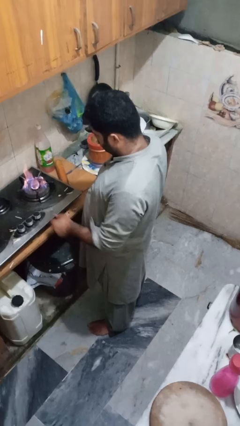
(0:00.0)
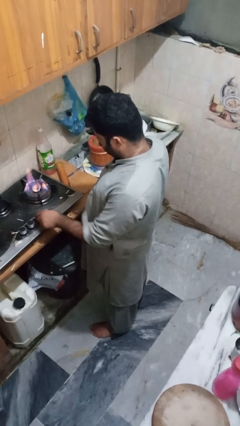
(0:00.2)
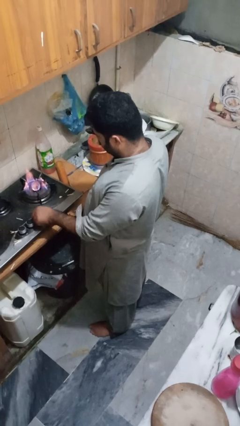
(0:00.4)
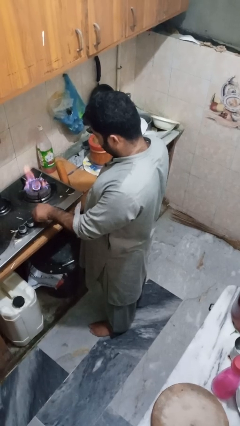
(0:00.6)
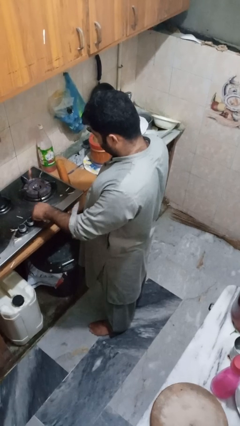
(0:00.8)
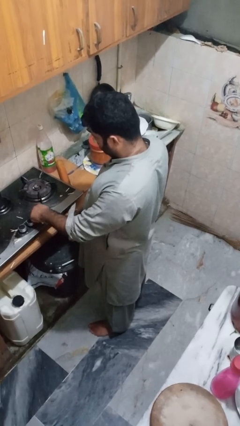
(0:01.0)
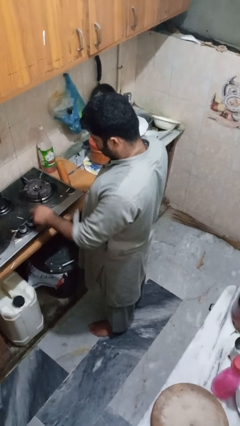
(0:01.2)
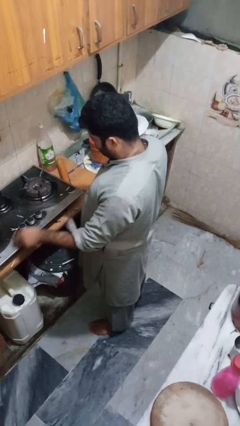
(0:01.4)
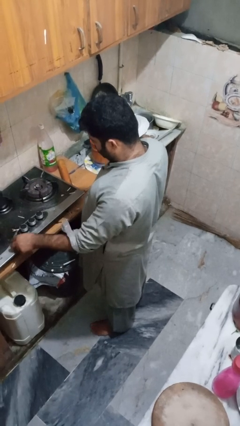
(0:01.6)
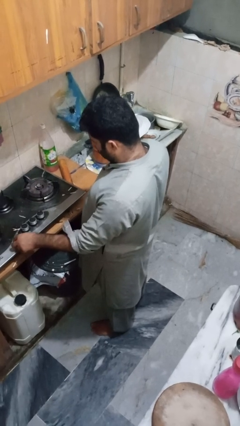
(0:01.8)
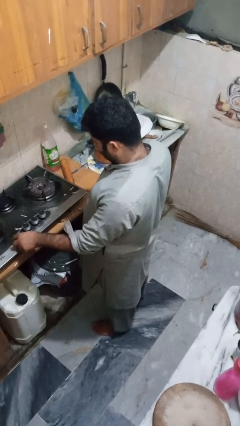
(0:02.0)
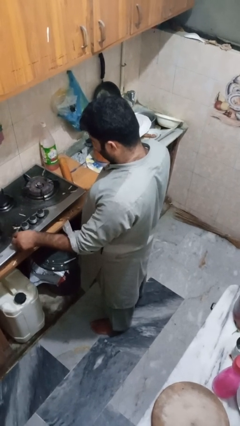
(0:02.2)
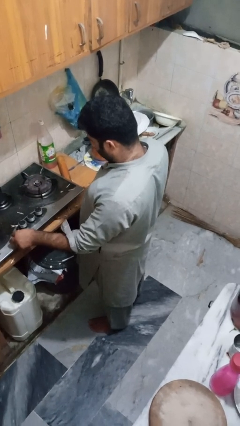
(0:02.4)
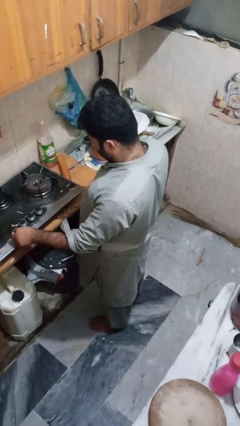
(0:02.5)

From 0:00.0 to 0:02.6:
person turns off stovetop

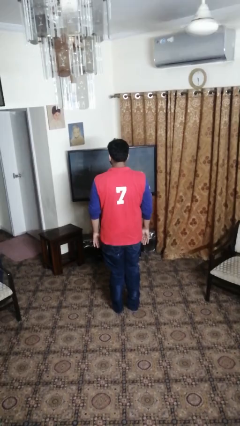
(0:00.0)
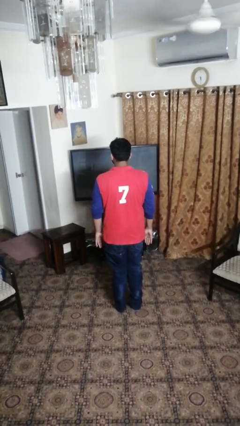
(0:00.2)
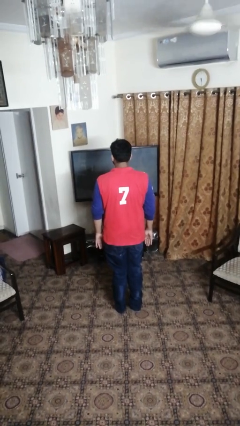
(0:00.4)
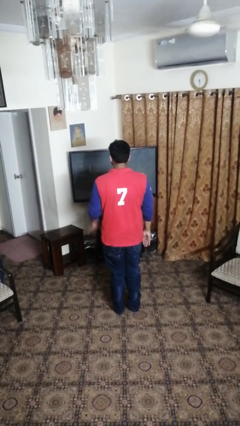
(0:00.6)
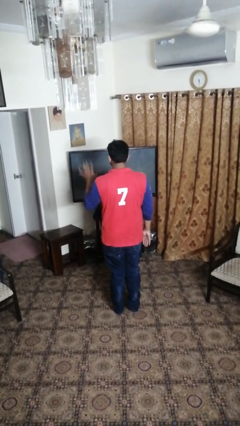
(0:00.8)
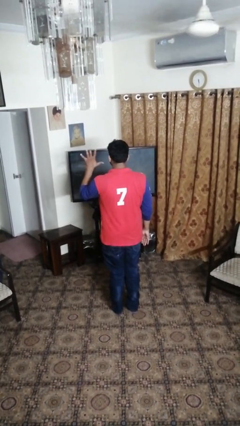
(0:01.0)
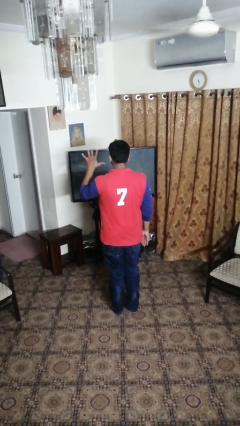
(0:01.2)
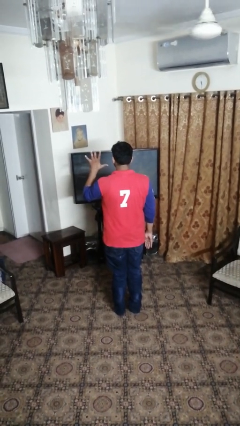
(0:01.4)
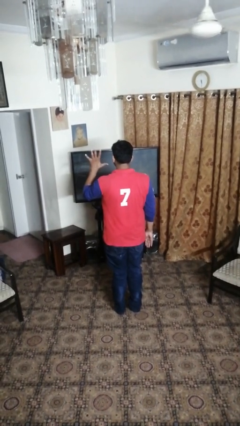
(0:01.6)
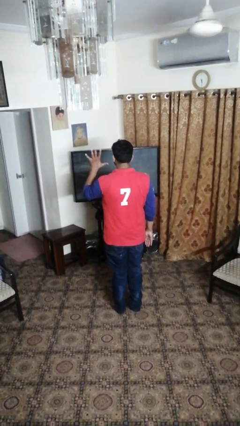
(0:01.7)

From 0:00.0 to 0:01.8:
person gestures number five

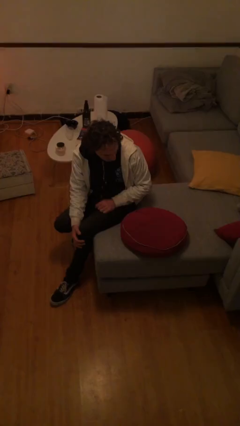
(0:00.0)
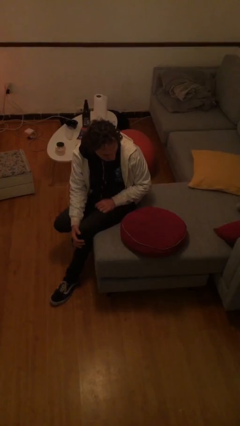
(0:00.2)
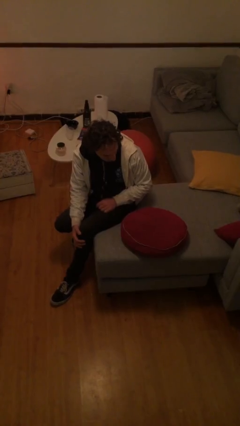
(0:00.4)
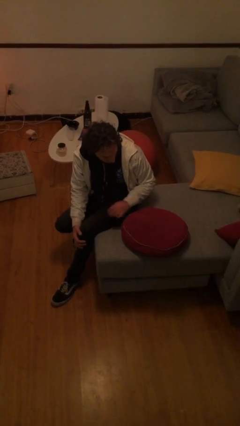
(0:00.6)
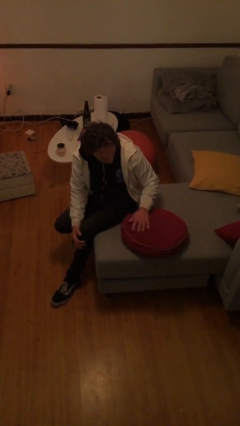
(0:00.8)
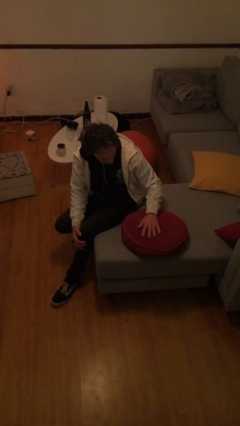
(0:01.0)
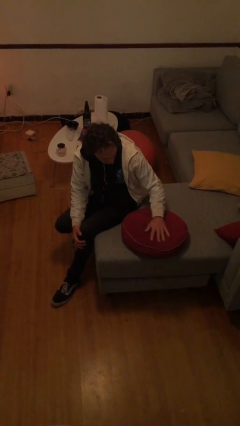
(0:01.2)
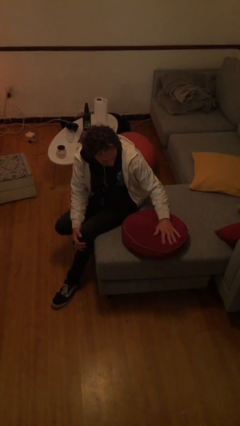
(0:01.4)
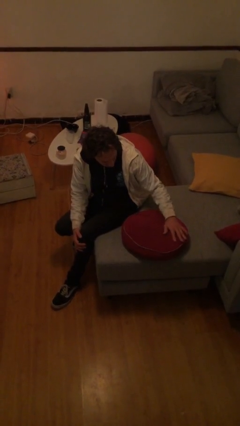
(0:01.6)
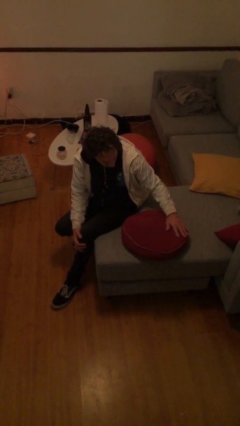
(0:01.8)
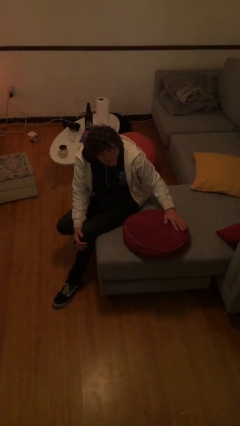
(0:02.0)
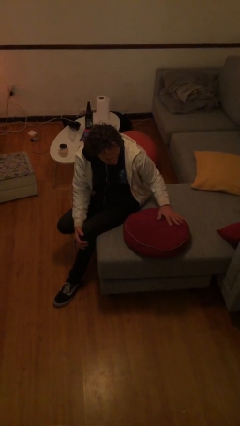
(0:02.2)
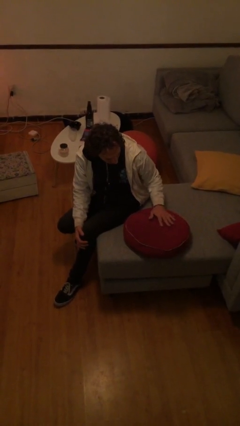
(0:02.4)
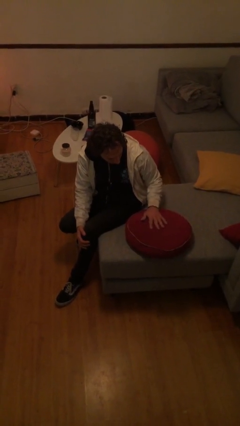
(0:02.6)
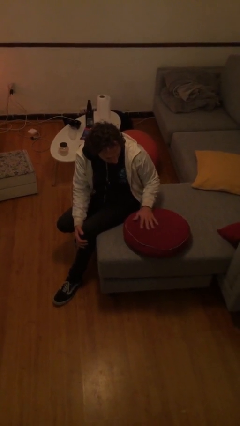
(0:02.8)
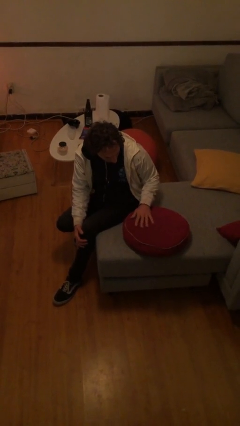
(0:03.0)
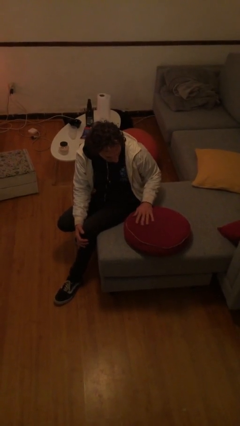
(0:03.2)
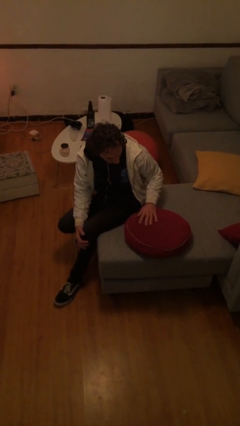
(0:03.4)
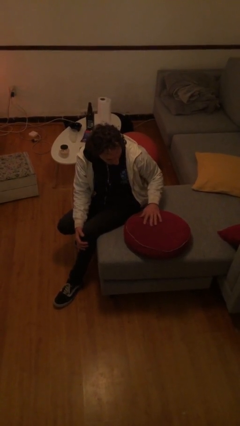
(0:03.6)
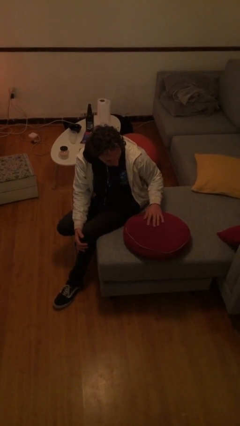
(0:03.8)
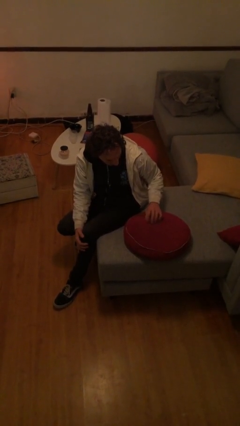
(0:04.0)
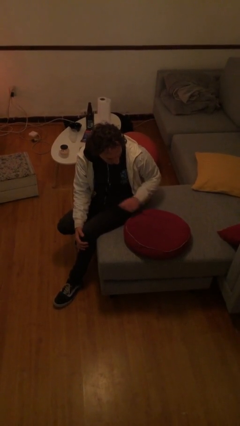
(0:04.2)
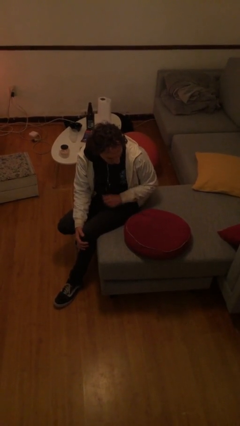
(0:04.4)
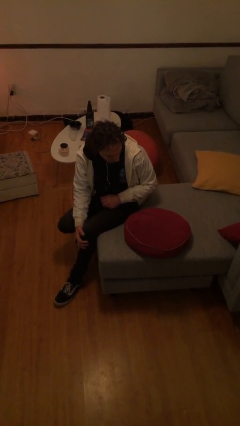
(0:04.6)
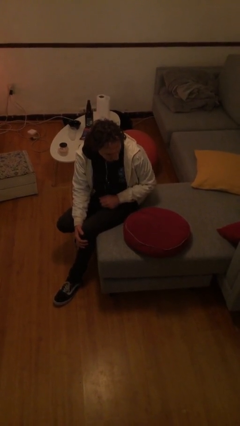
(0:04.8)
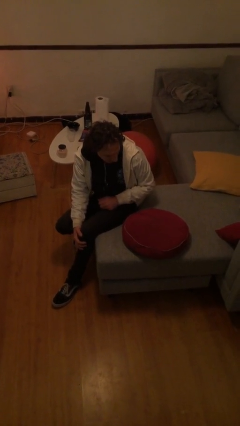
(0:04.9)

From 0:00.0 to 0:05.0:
person waves hand over object

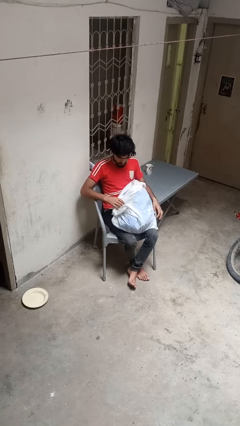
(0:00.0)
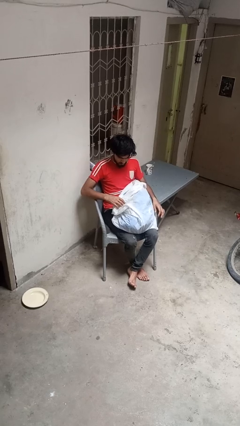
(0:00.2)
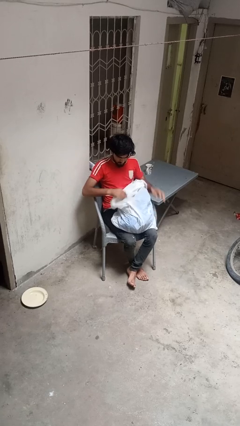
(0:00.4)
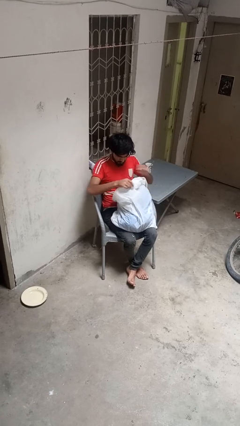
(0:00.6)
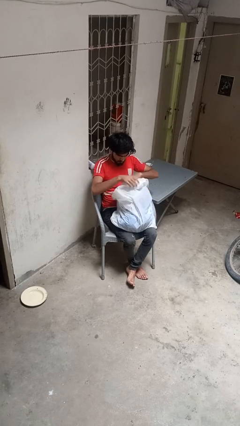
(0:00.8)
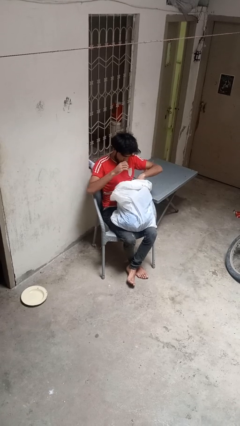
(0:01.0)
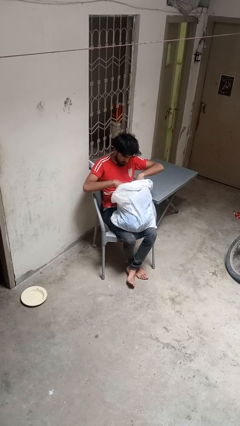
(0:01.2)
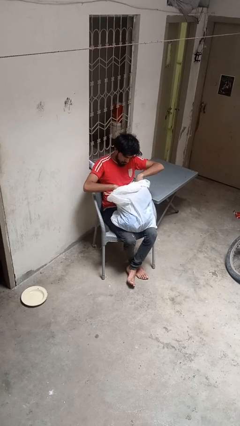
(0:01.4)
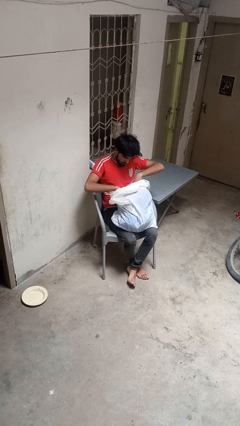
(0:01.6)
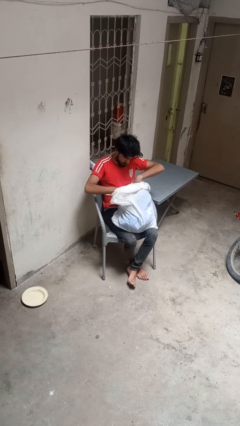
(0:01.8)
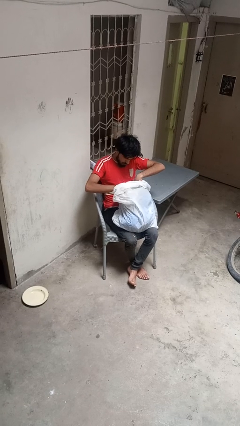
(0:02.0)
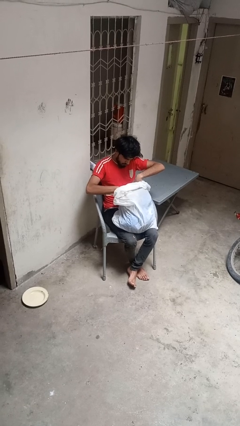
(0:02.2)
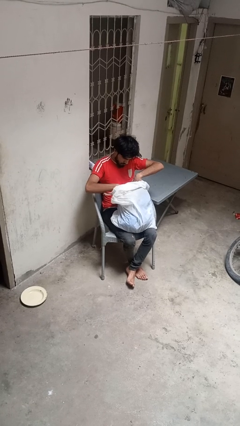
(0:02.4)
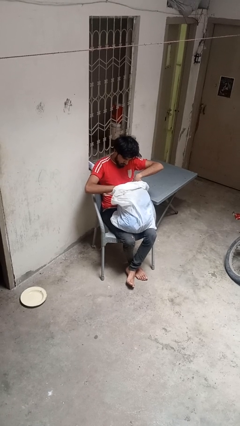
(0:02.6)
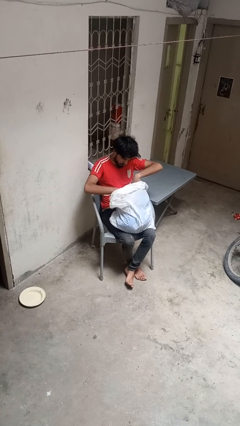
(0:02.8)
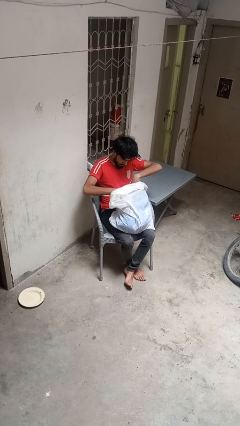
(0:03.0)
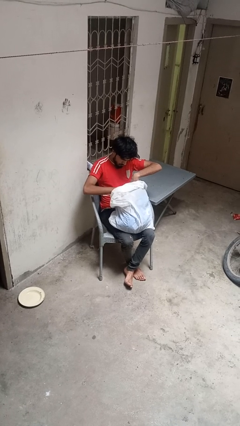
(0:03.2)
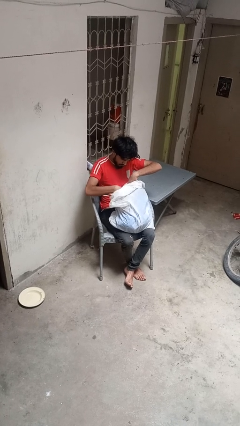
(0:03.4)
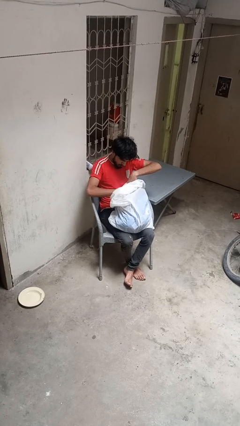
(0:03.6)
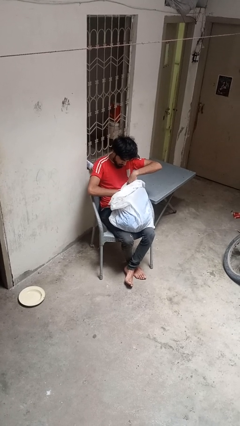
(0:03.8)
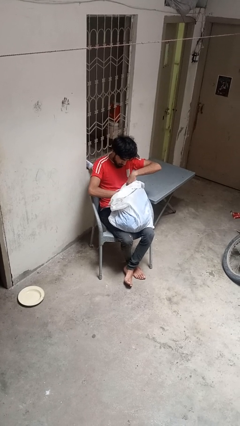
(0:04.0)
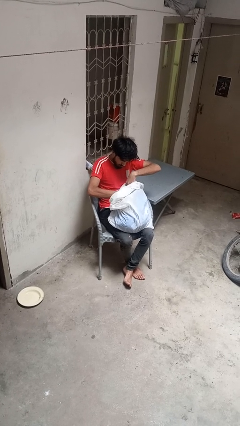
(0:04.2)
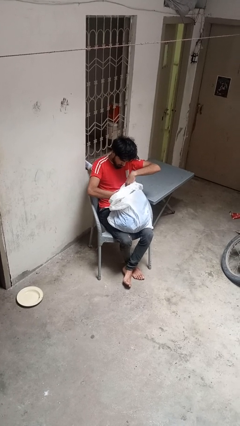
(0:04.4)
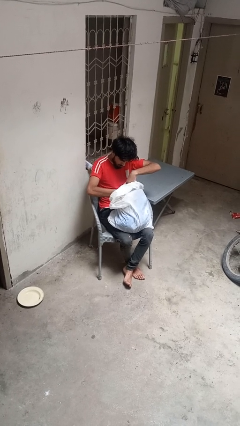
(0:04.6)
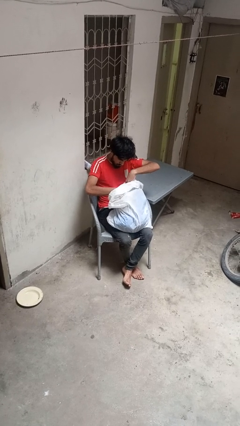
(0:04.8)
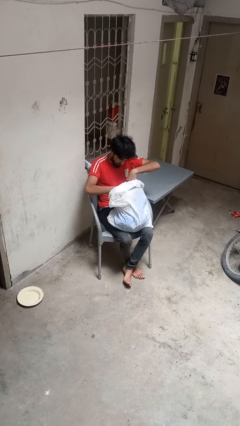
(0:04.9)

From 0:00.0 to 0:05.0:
person searches in bag

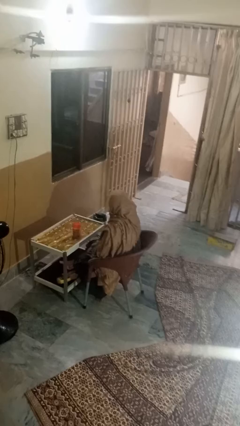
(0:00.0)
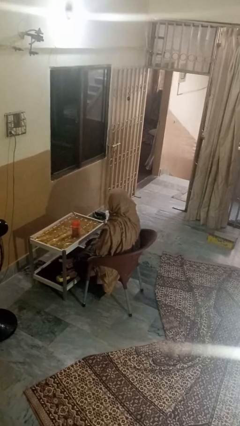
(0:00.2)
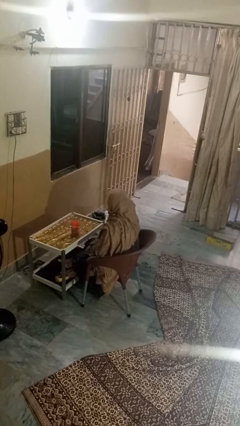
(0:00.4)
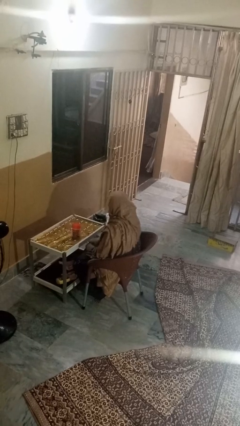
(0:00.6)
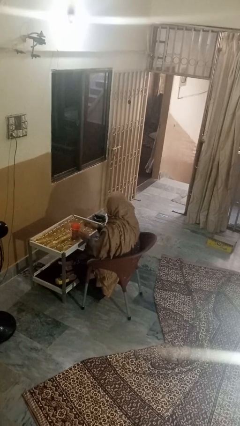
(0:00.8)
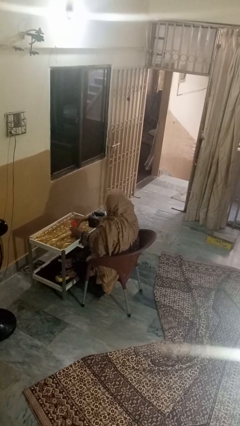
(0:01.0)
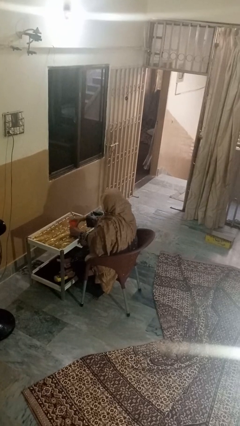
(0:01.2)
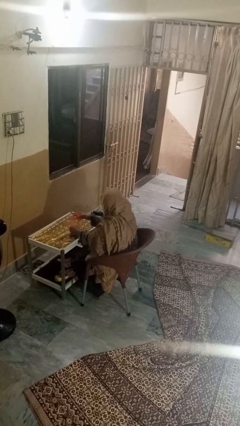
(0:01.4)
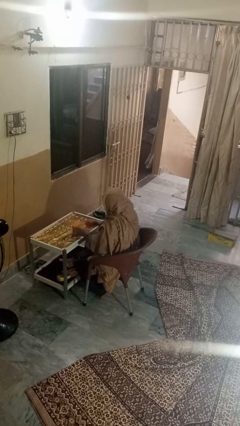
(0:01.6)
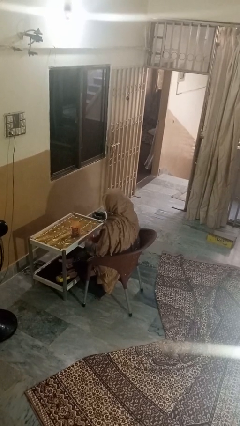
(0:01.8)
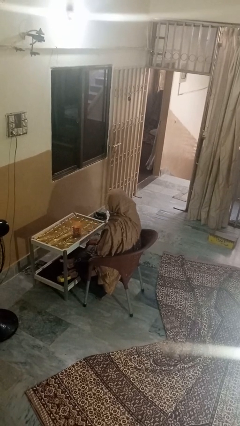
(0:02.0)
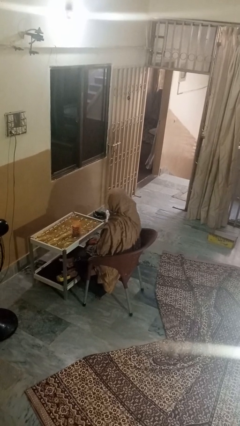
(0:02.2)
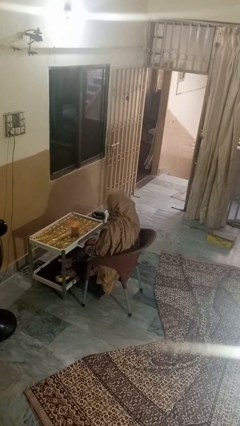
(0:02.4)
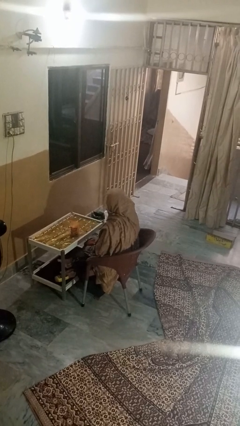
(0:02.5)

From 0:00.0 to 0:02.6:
person opens jar

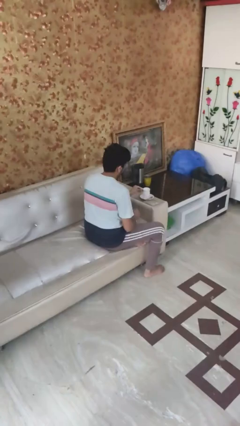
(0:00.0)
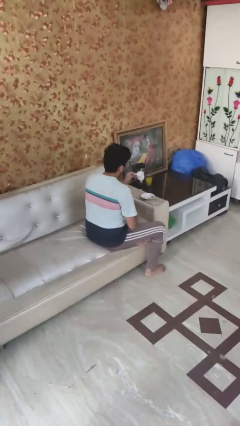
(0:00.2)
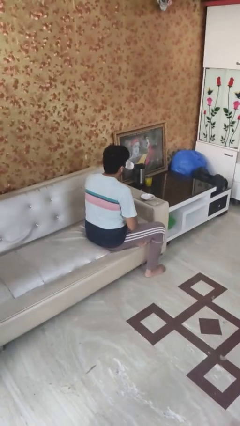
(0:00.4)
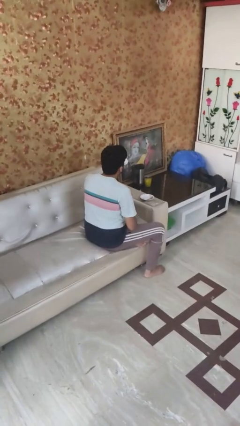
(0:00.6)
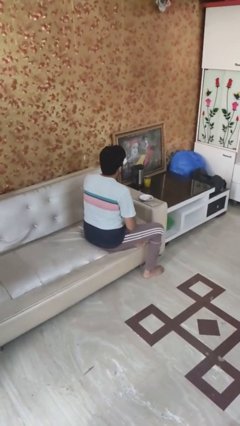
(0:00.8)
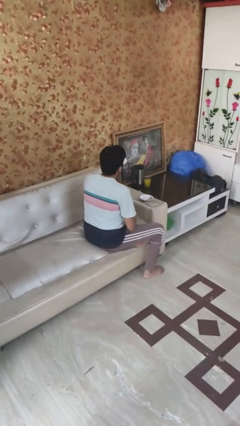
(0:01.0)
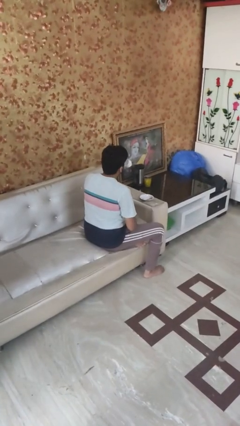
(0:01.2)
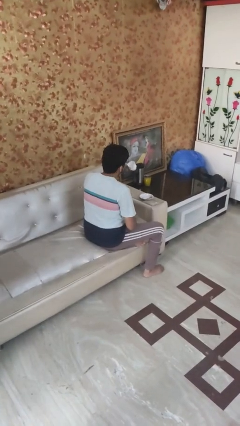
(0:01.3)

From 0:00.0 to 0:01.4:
person drinks from mug
